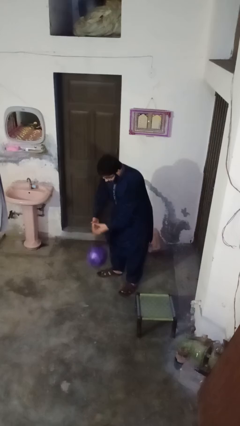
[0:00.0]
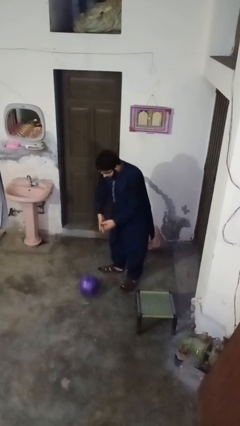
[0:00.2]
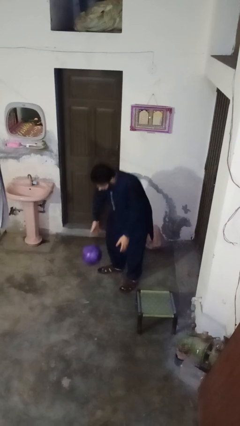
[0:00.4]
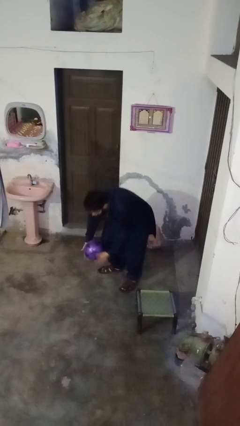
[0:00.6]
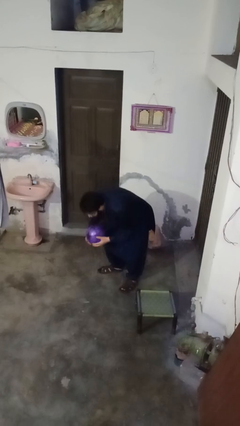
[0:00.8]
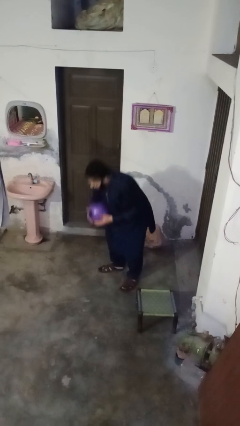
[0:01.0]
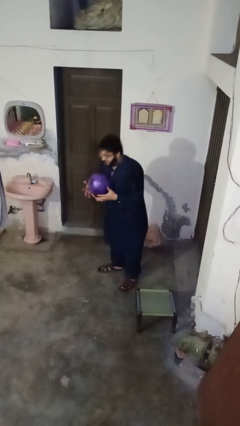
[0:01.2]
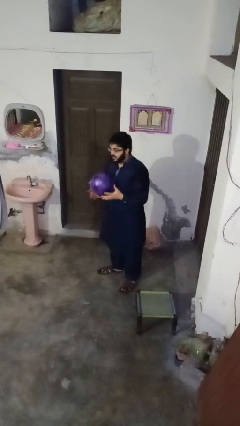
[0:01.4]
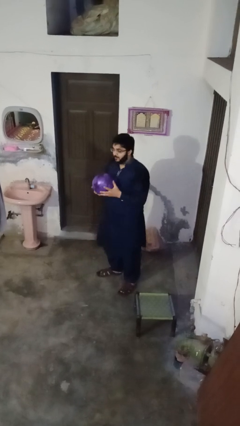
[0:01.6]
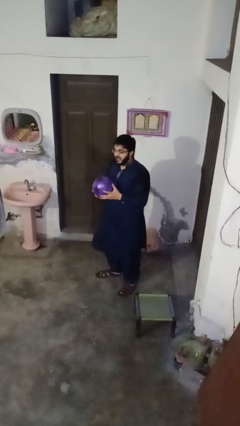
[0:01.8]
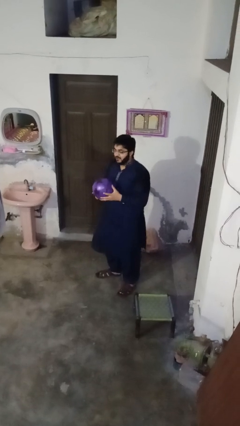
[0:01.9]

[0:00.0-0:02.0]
person bounces ball on floor

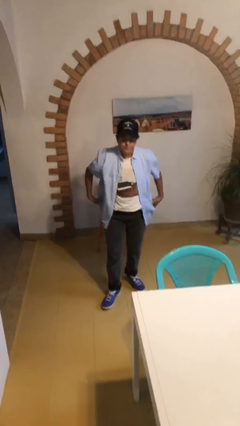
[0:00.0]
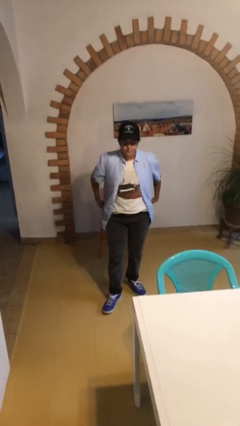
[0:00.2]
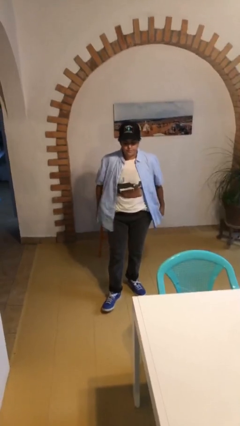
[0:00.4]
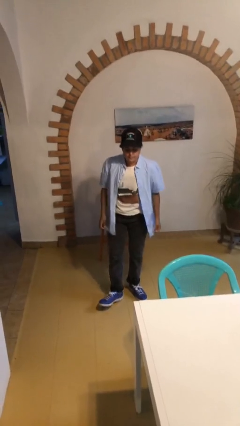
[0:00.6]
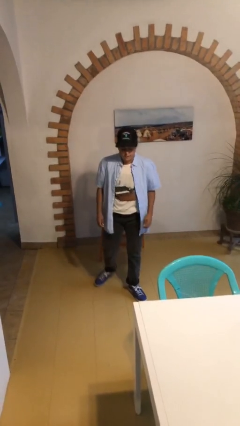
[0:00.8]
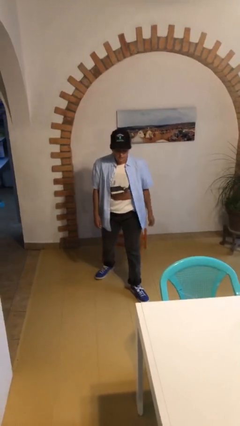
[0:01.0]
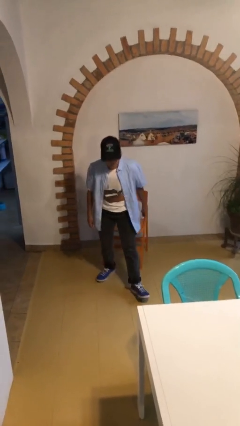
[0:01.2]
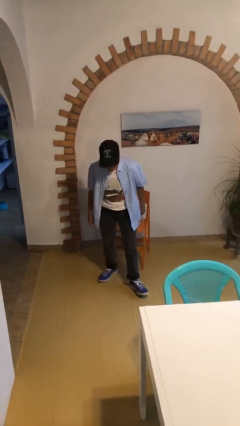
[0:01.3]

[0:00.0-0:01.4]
person stands up from floor

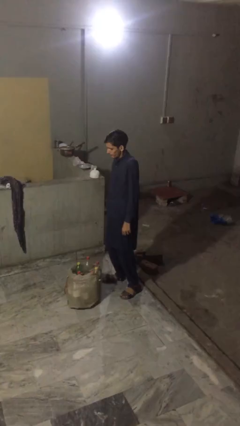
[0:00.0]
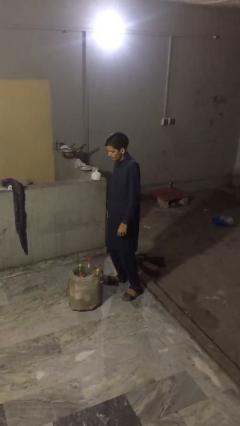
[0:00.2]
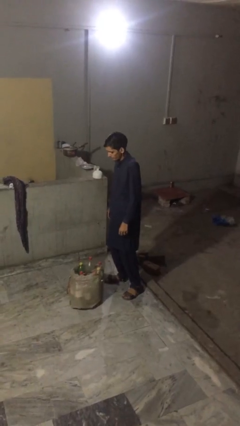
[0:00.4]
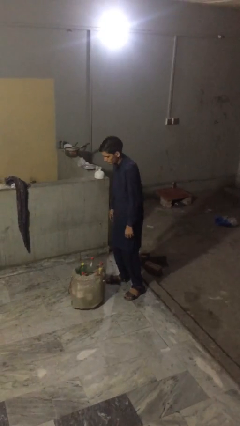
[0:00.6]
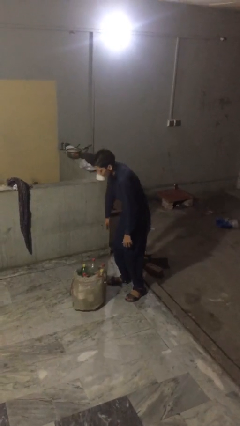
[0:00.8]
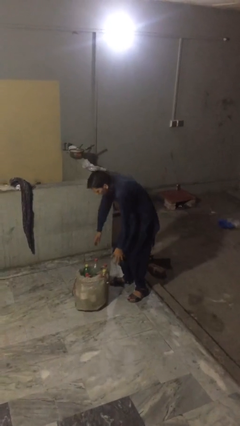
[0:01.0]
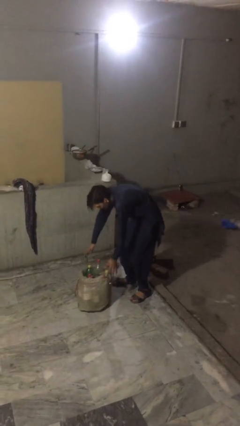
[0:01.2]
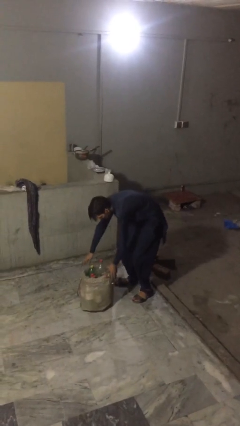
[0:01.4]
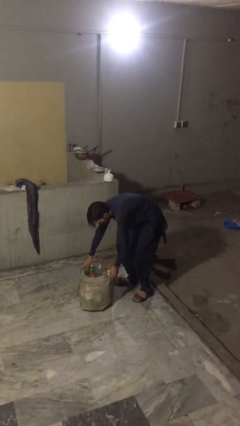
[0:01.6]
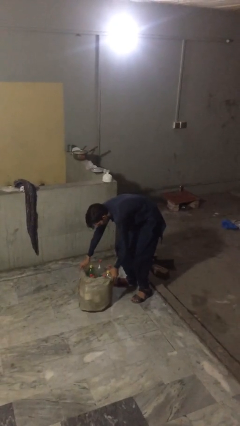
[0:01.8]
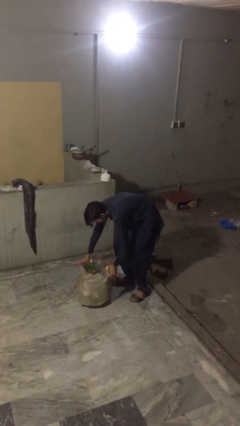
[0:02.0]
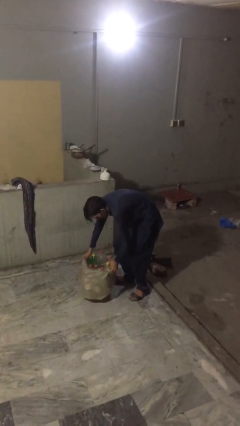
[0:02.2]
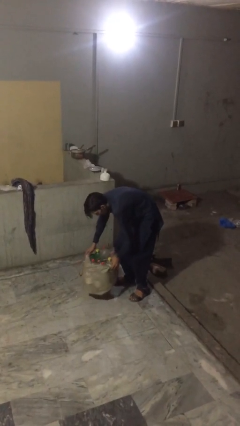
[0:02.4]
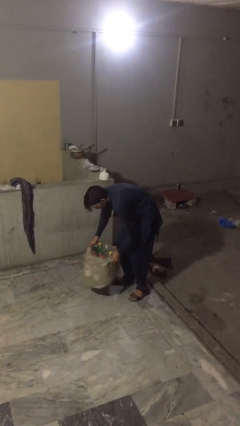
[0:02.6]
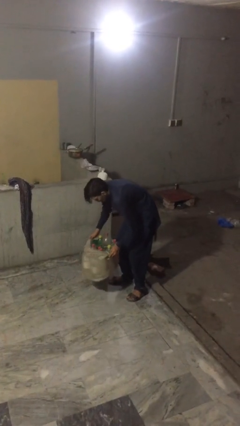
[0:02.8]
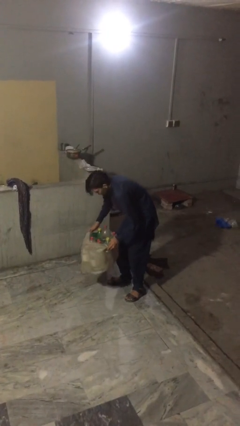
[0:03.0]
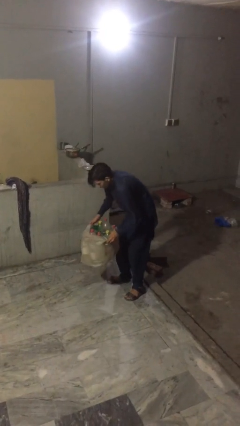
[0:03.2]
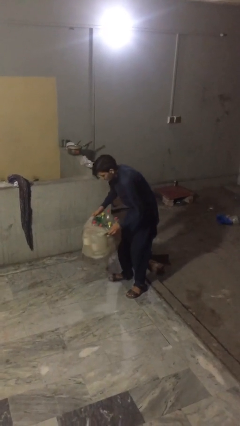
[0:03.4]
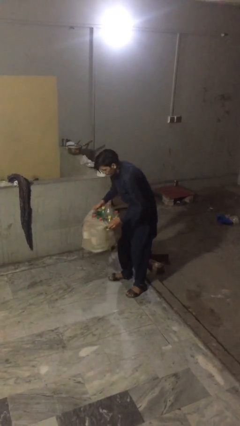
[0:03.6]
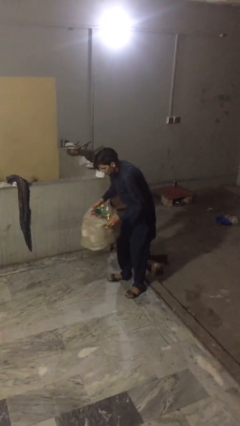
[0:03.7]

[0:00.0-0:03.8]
person picks up object from floor

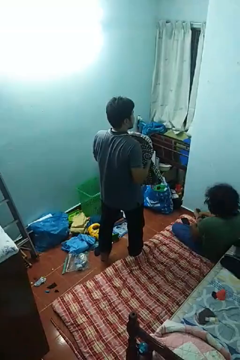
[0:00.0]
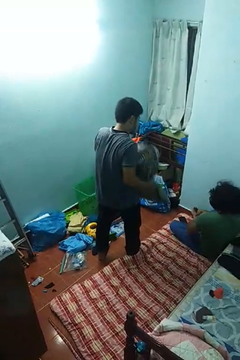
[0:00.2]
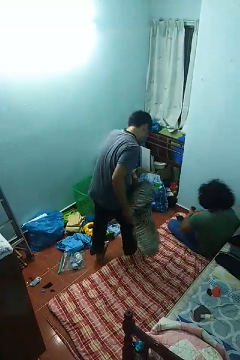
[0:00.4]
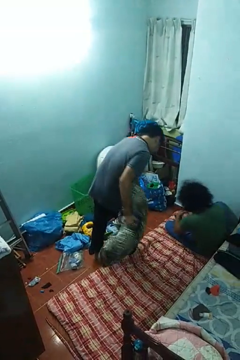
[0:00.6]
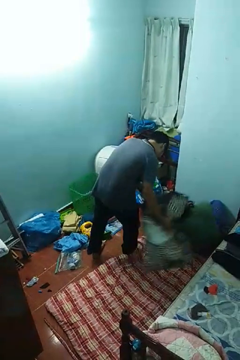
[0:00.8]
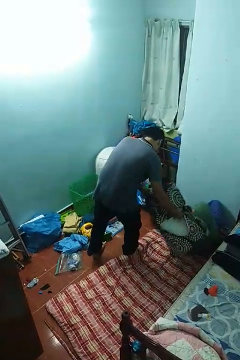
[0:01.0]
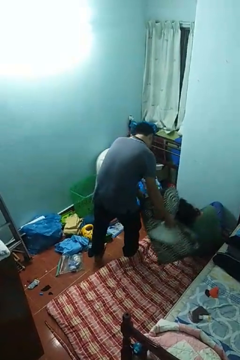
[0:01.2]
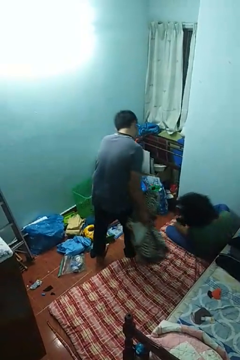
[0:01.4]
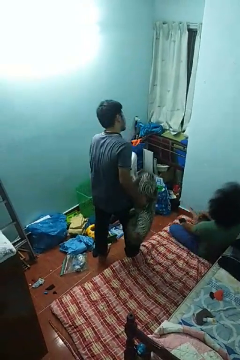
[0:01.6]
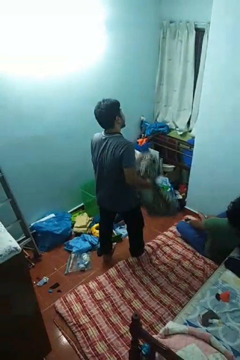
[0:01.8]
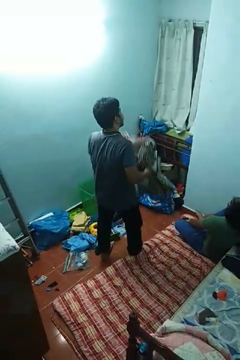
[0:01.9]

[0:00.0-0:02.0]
person hits person with pillow

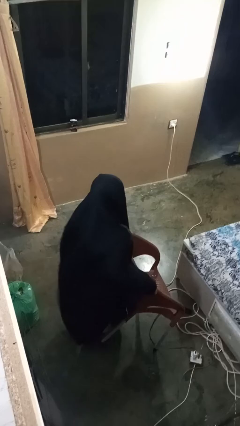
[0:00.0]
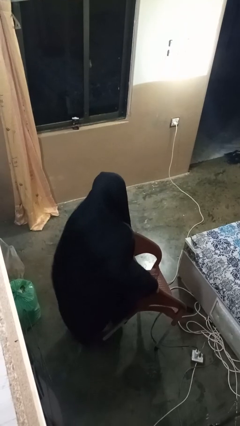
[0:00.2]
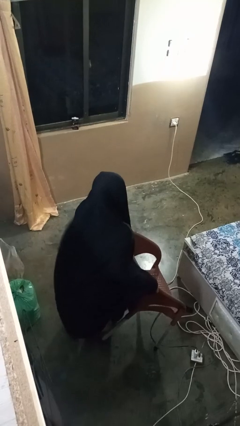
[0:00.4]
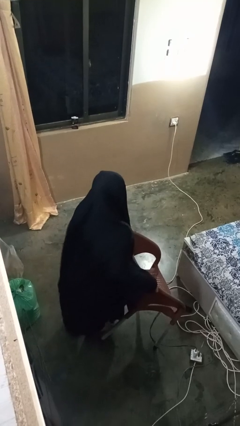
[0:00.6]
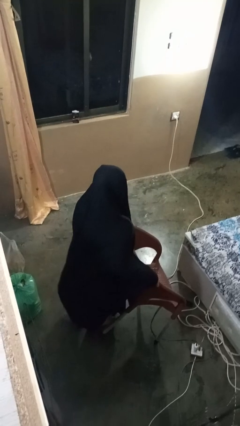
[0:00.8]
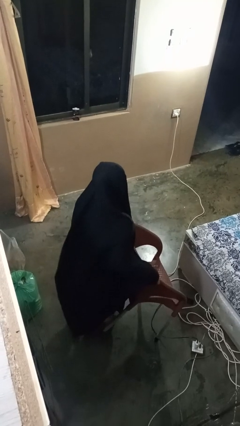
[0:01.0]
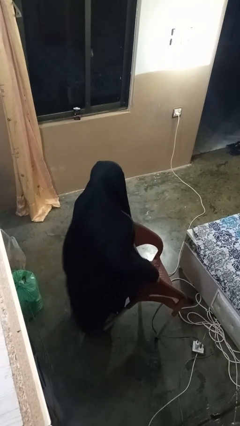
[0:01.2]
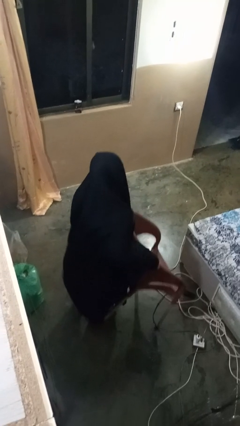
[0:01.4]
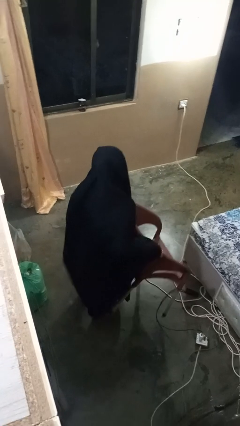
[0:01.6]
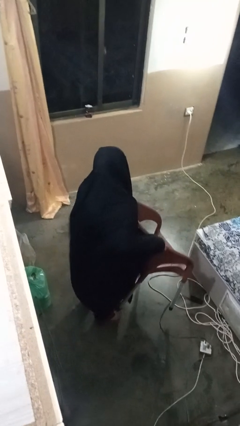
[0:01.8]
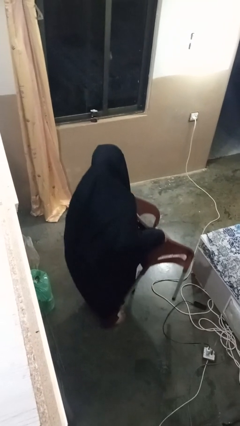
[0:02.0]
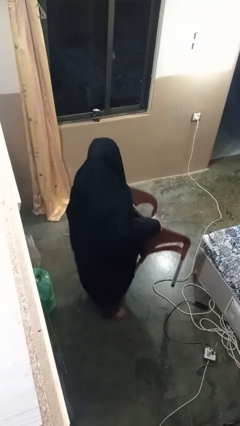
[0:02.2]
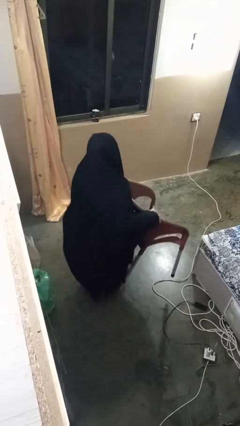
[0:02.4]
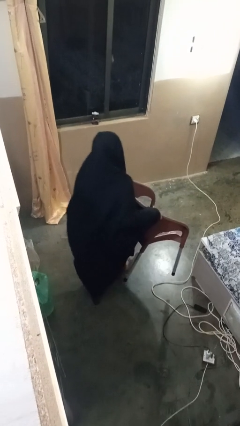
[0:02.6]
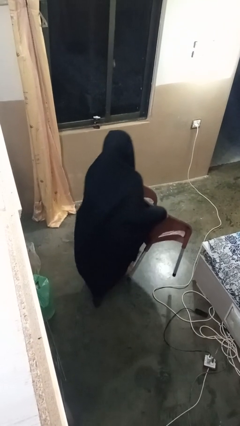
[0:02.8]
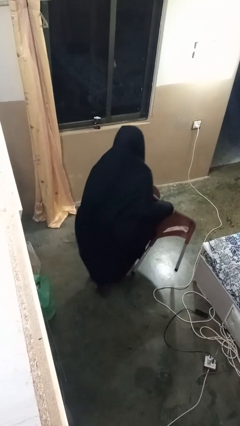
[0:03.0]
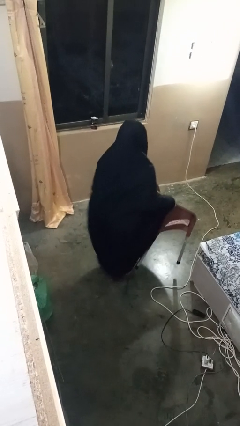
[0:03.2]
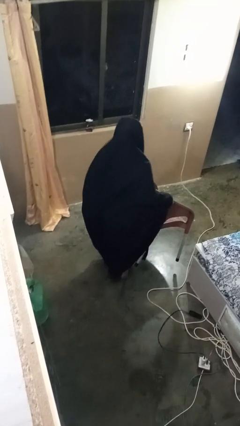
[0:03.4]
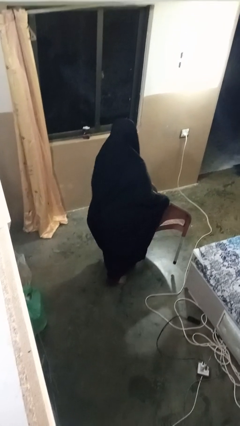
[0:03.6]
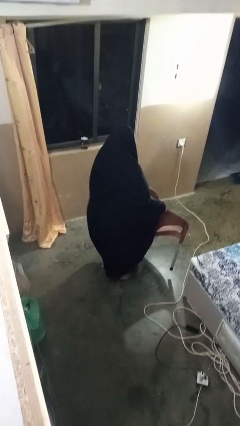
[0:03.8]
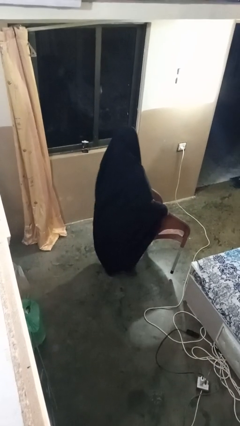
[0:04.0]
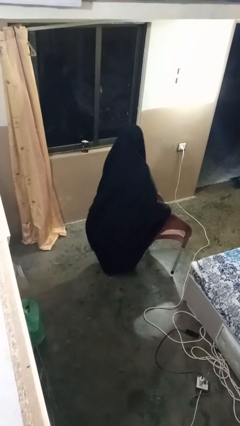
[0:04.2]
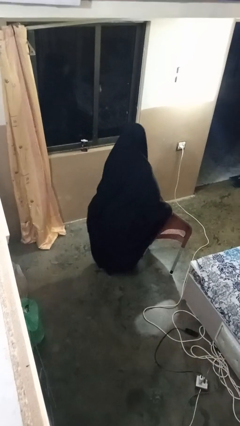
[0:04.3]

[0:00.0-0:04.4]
person carries furniture

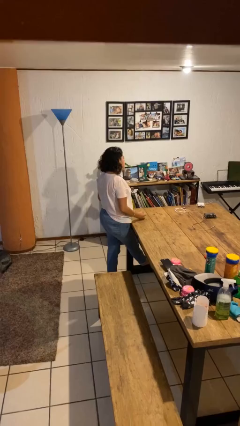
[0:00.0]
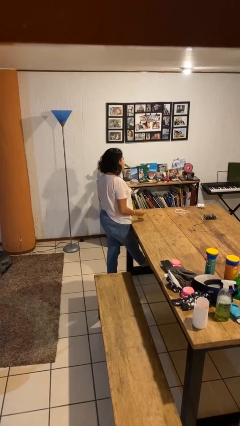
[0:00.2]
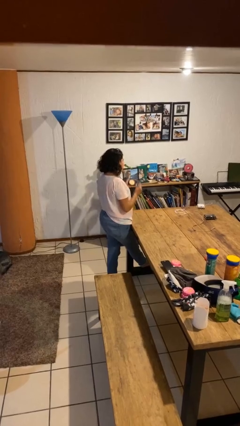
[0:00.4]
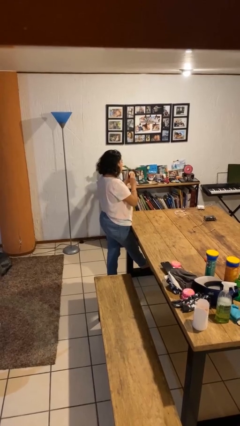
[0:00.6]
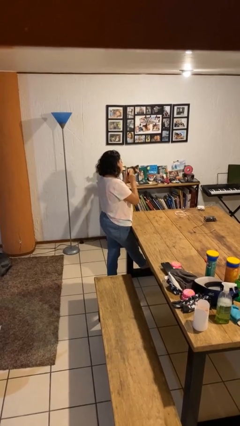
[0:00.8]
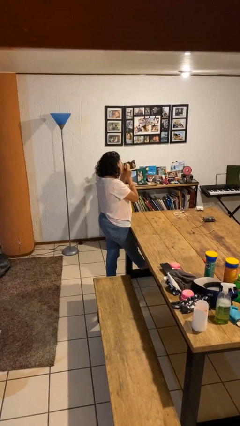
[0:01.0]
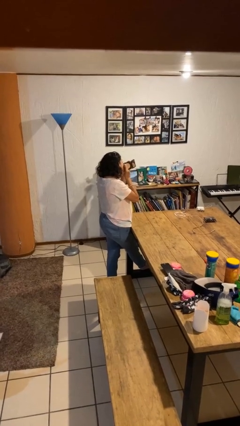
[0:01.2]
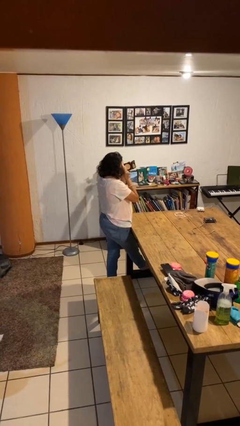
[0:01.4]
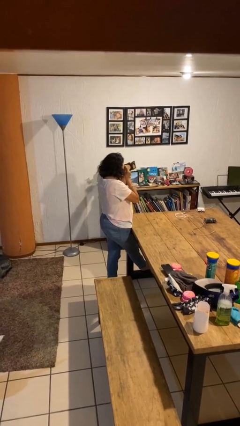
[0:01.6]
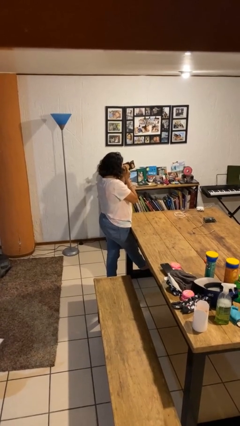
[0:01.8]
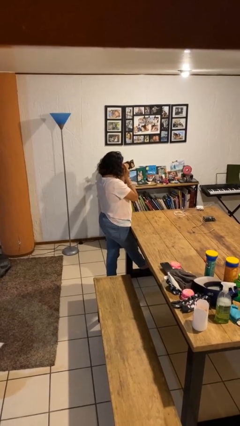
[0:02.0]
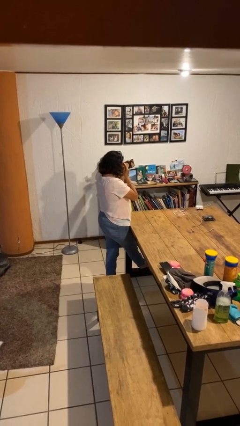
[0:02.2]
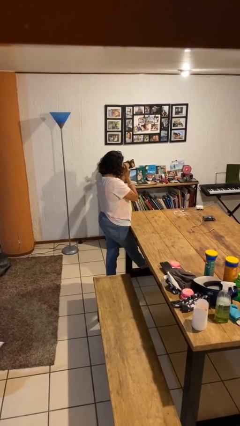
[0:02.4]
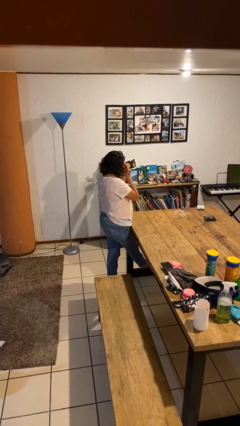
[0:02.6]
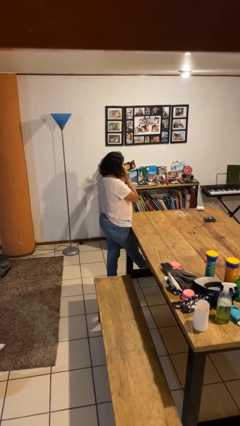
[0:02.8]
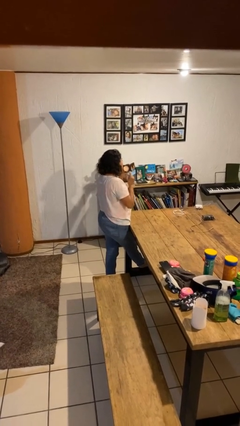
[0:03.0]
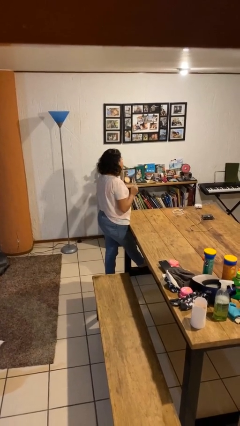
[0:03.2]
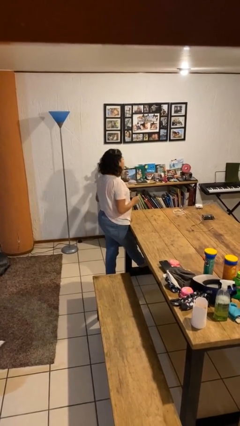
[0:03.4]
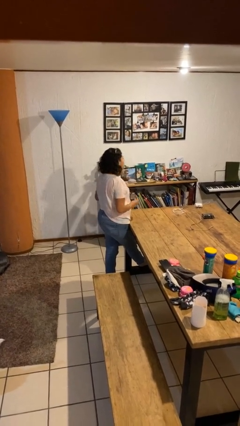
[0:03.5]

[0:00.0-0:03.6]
person applies foundation makeup

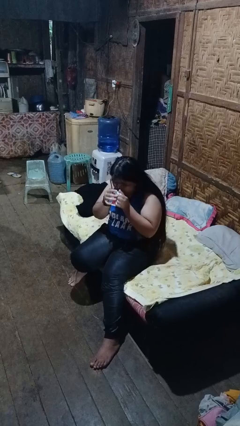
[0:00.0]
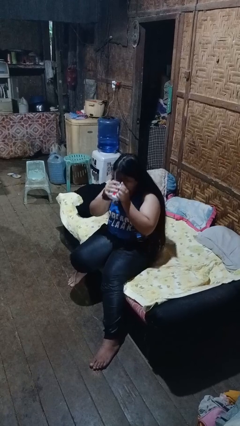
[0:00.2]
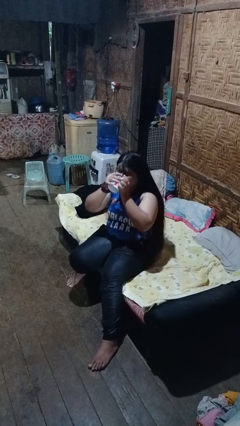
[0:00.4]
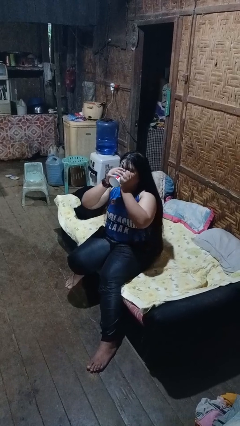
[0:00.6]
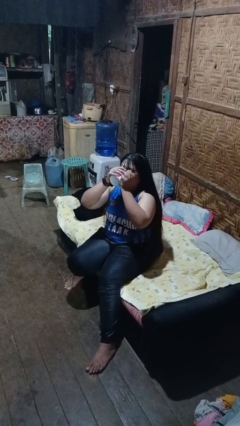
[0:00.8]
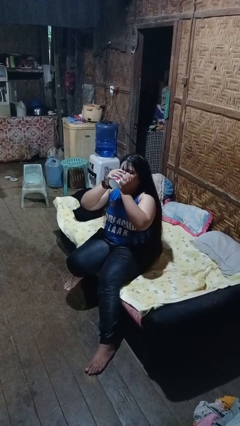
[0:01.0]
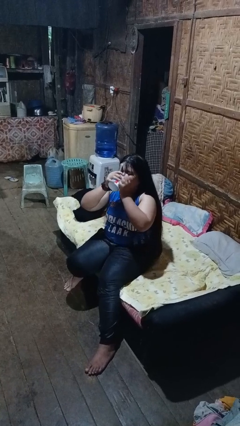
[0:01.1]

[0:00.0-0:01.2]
person drinks from mug
